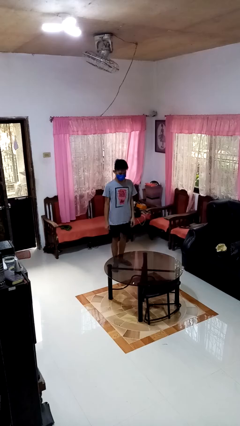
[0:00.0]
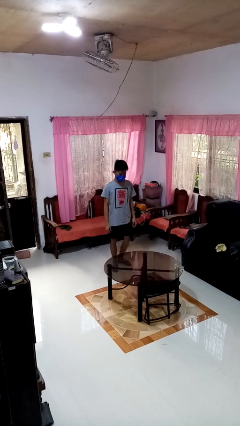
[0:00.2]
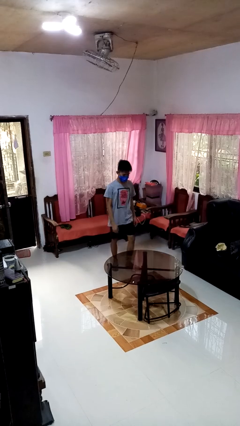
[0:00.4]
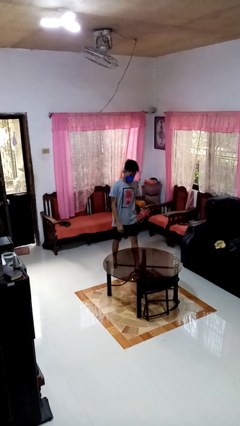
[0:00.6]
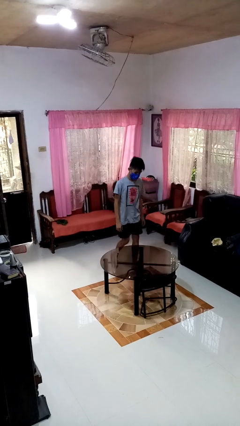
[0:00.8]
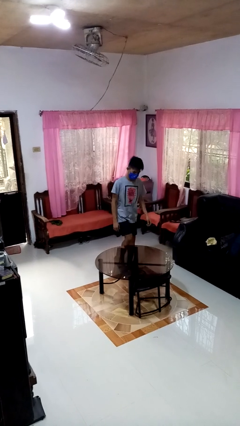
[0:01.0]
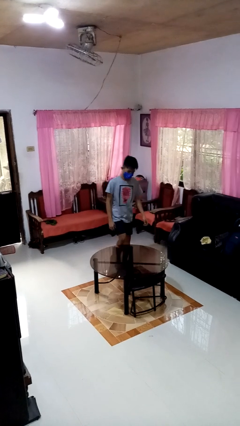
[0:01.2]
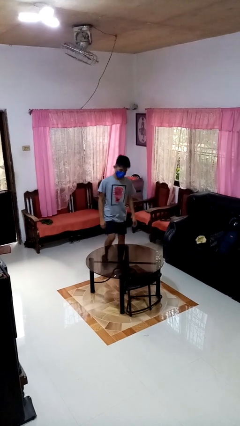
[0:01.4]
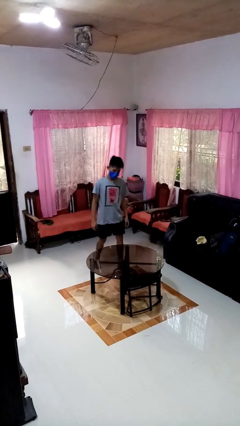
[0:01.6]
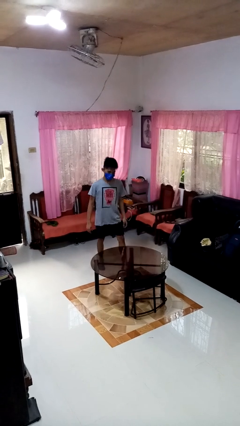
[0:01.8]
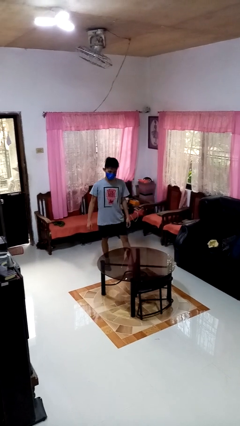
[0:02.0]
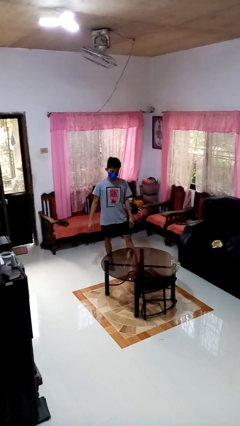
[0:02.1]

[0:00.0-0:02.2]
person bumps into table

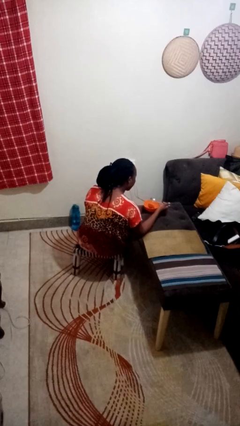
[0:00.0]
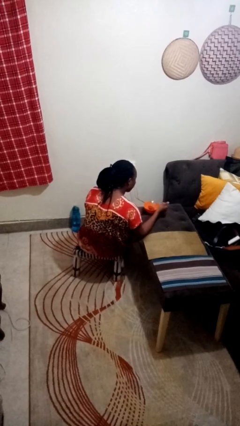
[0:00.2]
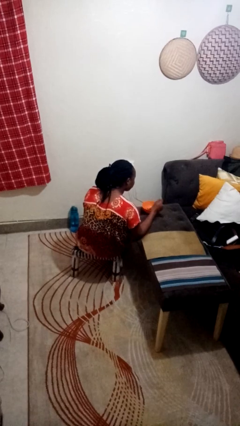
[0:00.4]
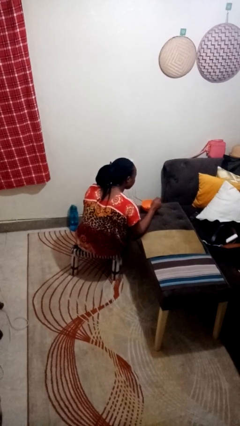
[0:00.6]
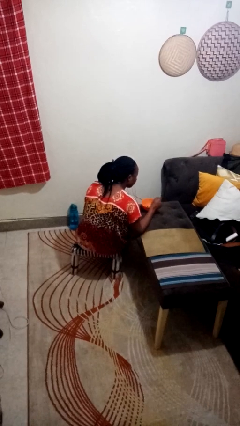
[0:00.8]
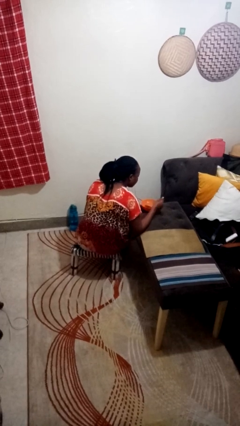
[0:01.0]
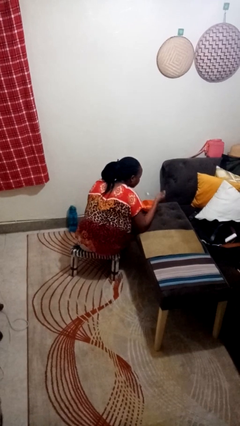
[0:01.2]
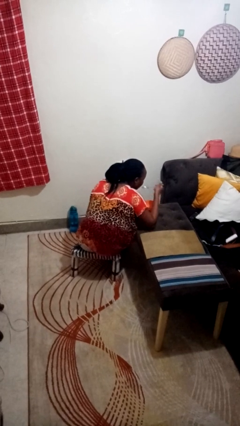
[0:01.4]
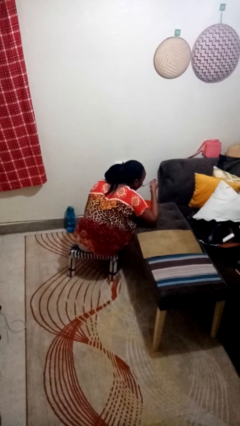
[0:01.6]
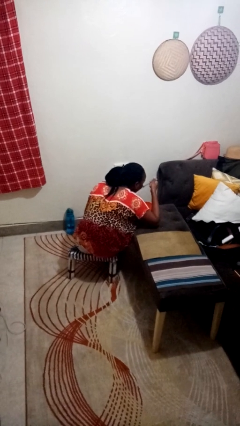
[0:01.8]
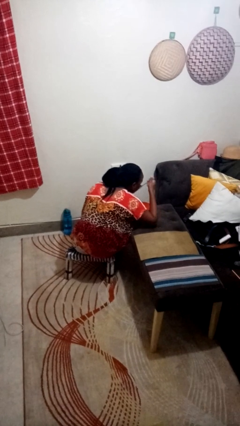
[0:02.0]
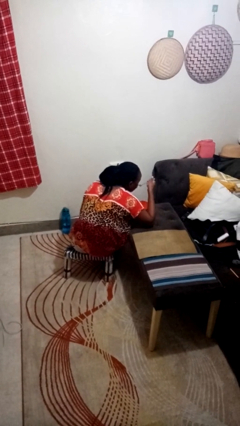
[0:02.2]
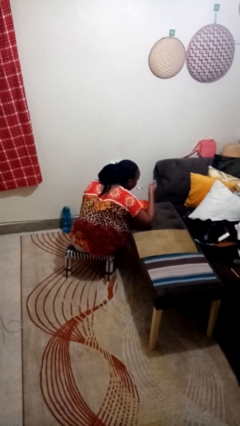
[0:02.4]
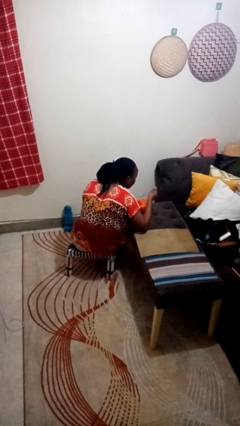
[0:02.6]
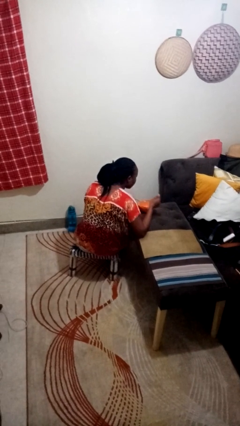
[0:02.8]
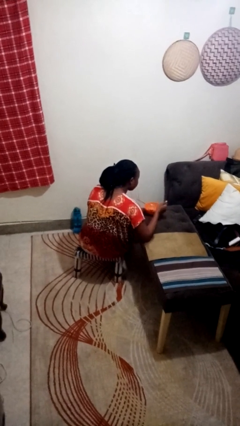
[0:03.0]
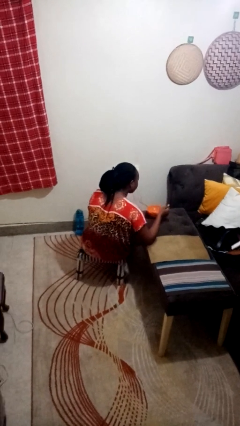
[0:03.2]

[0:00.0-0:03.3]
person eats with utensil

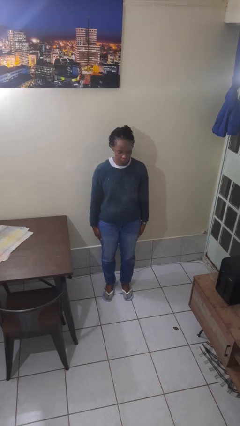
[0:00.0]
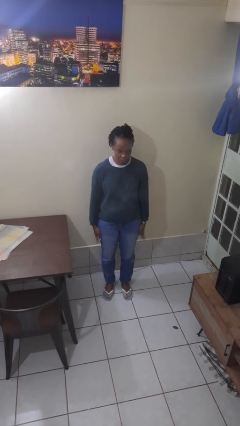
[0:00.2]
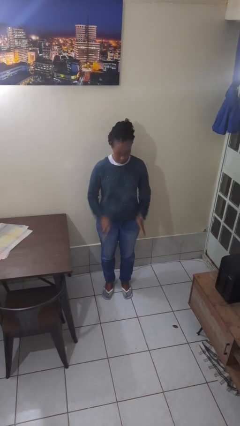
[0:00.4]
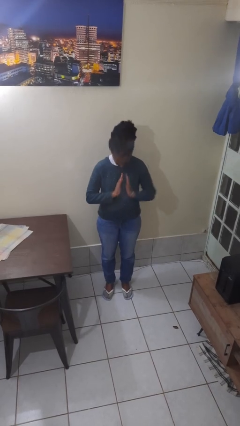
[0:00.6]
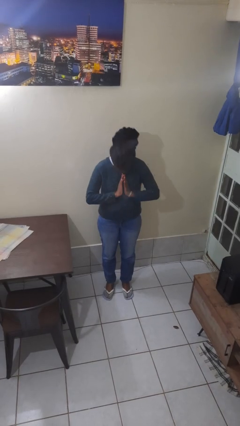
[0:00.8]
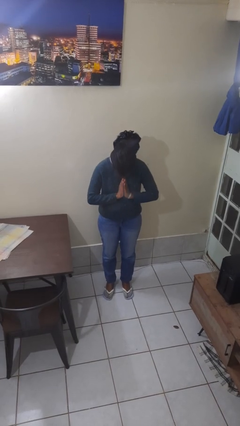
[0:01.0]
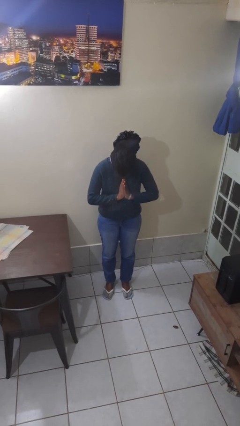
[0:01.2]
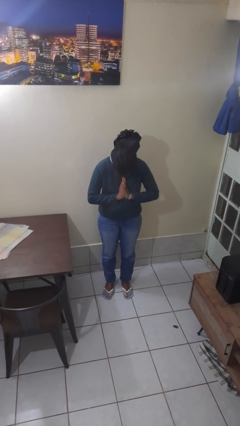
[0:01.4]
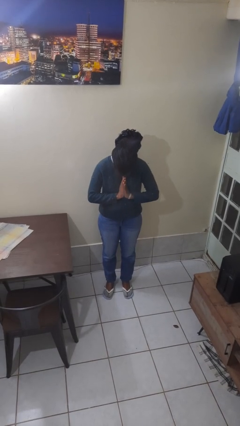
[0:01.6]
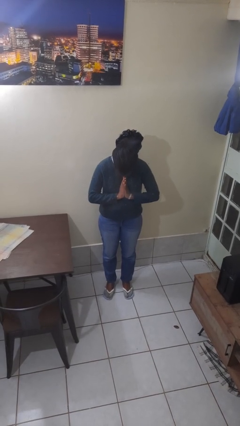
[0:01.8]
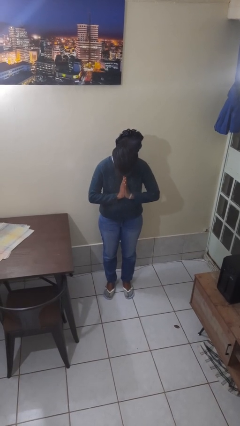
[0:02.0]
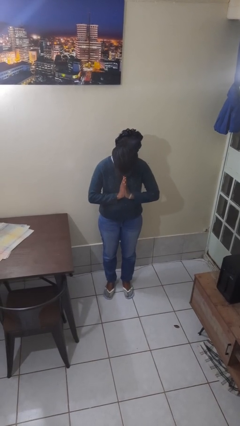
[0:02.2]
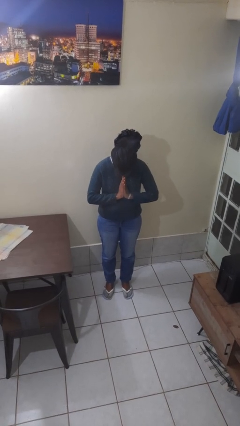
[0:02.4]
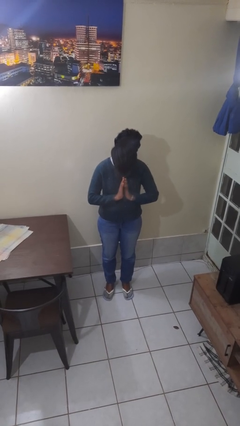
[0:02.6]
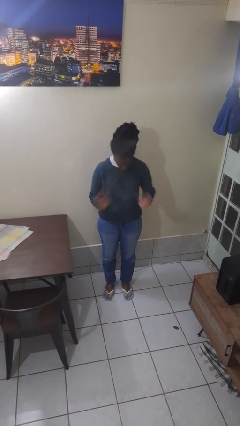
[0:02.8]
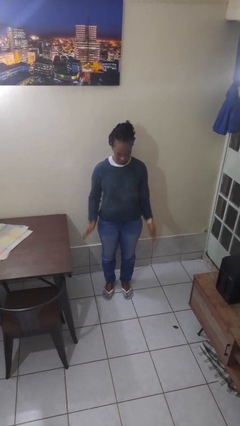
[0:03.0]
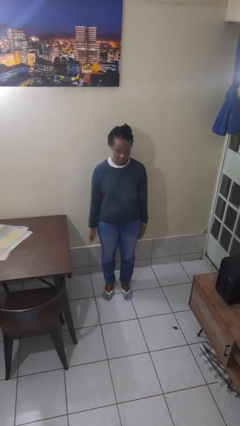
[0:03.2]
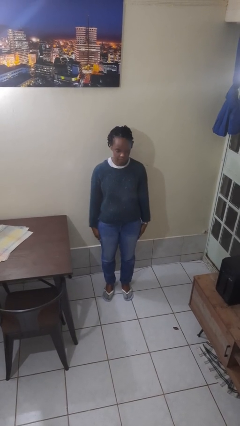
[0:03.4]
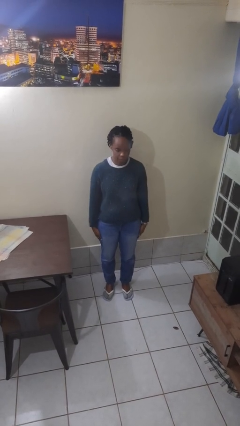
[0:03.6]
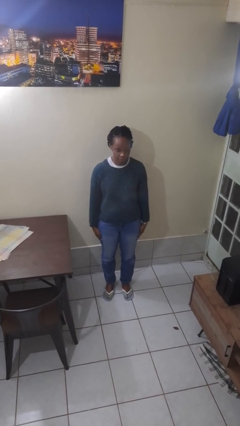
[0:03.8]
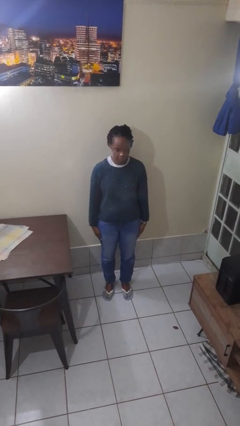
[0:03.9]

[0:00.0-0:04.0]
person prays

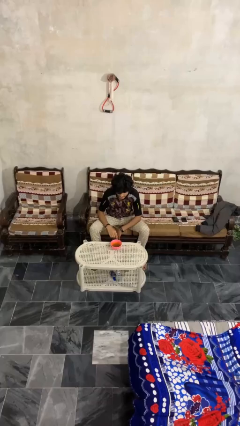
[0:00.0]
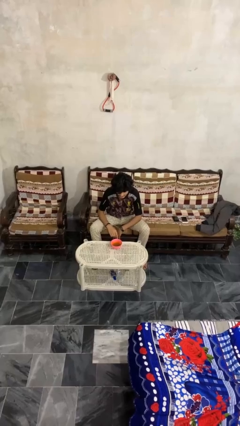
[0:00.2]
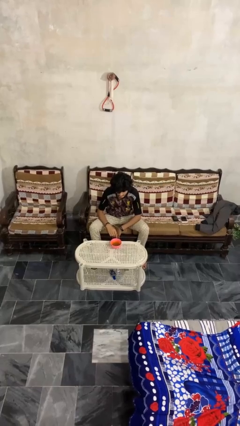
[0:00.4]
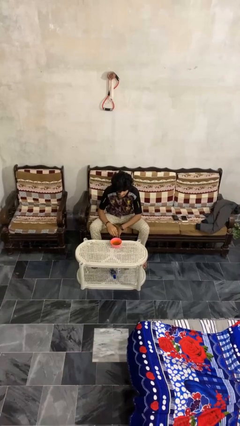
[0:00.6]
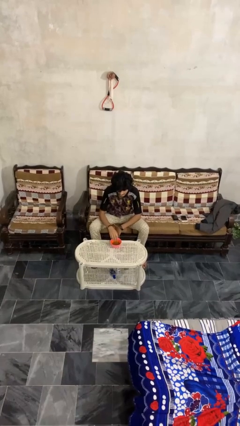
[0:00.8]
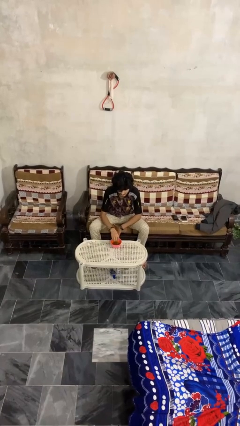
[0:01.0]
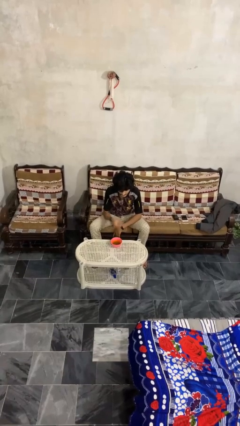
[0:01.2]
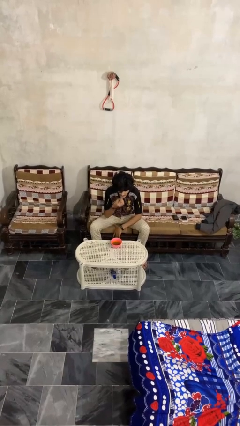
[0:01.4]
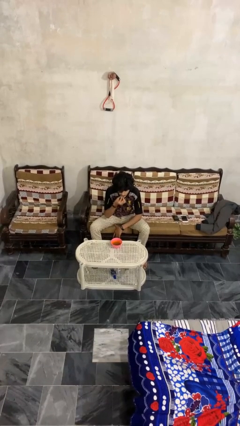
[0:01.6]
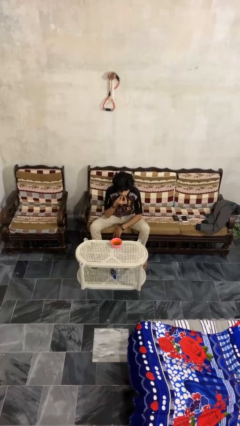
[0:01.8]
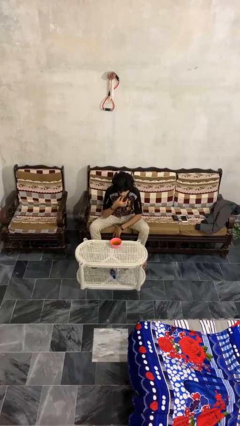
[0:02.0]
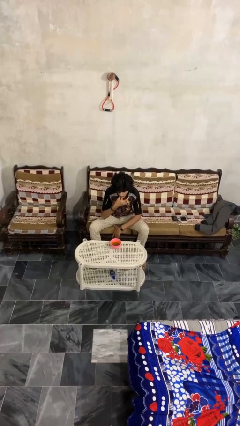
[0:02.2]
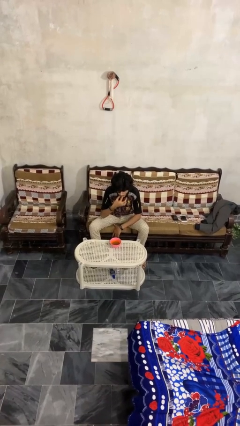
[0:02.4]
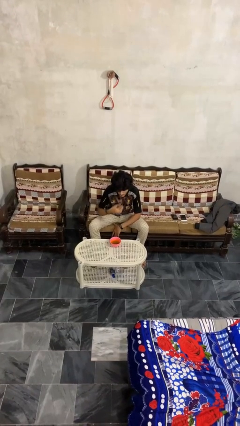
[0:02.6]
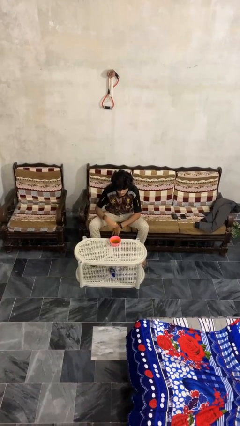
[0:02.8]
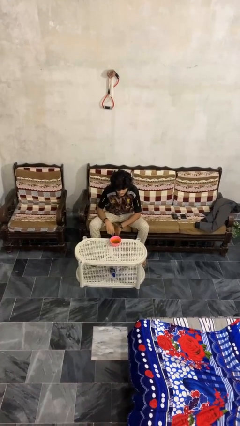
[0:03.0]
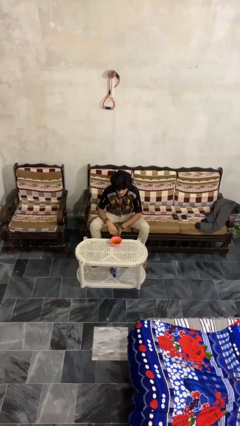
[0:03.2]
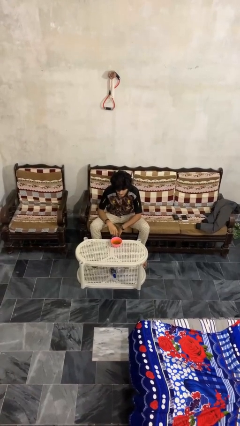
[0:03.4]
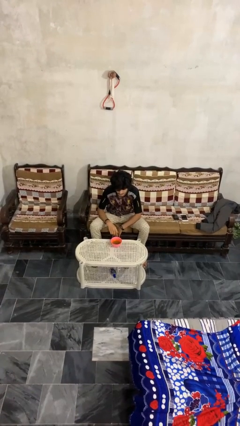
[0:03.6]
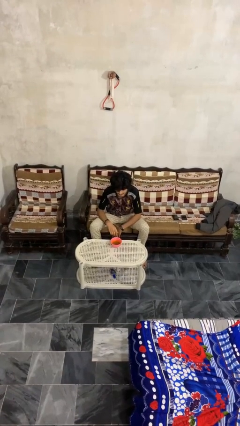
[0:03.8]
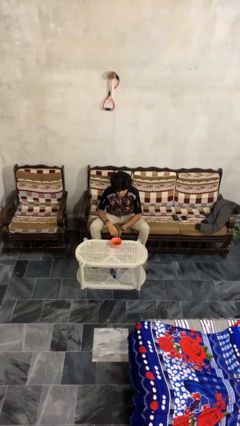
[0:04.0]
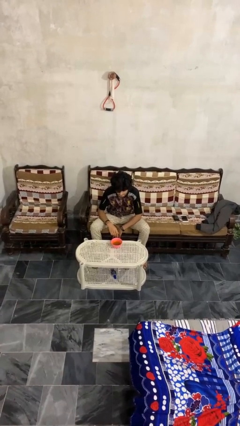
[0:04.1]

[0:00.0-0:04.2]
person eats with hands

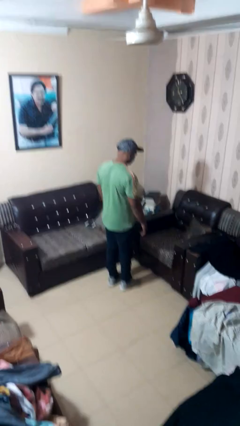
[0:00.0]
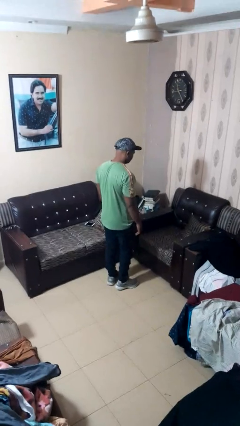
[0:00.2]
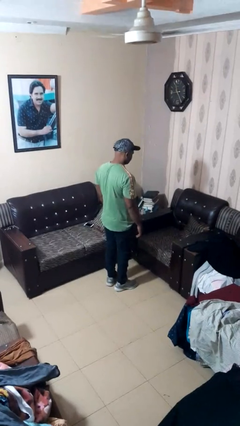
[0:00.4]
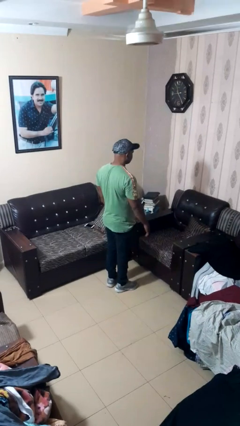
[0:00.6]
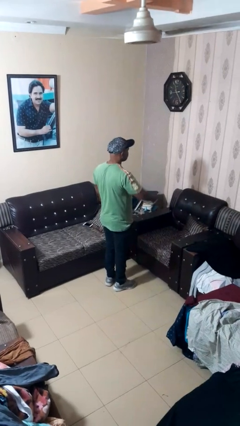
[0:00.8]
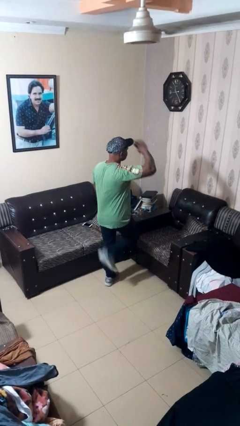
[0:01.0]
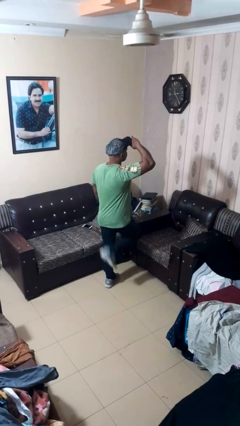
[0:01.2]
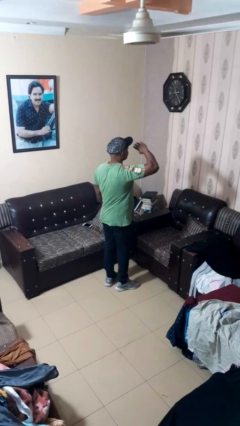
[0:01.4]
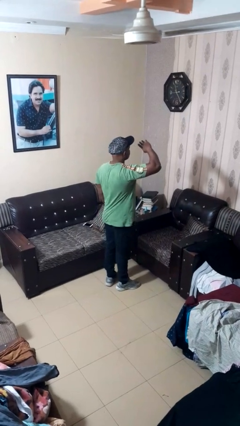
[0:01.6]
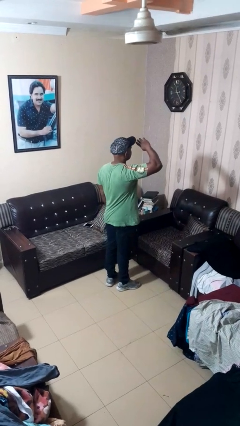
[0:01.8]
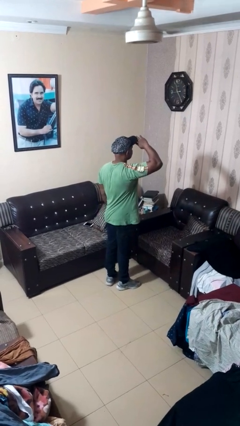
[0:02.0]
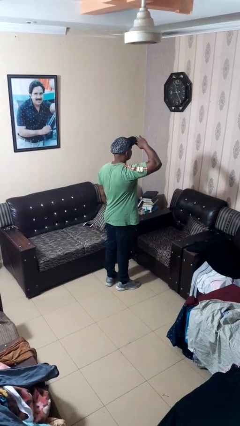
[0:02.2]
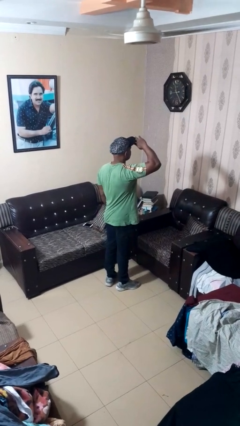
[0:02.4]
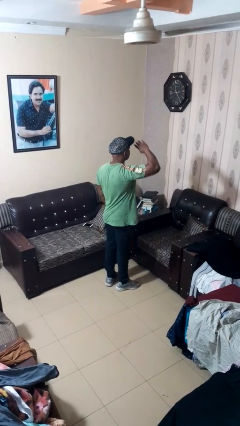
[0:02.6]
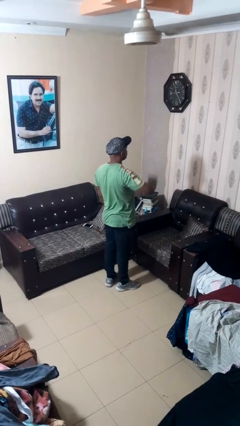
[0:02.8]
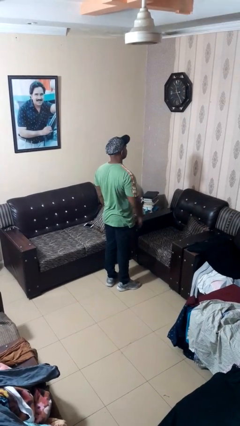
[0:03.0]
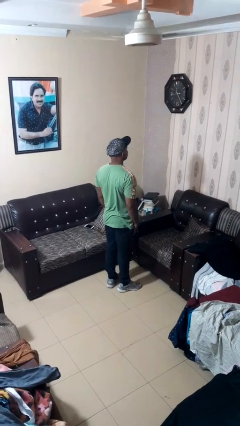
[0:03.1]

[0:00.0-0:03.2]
person salutes

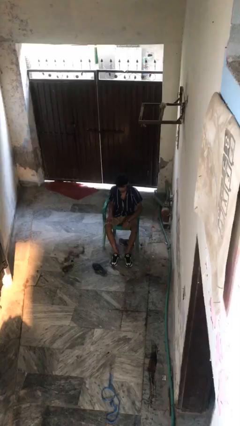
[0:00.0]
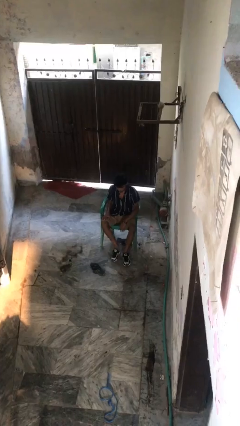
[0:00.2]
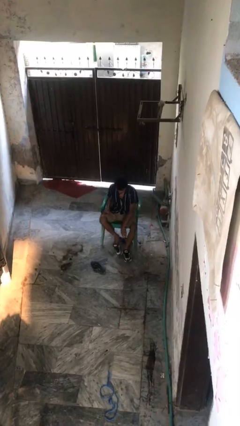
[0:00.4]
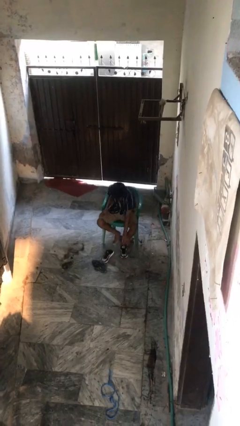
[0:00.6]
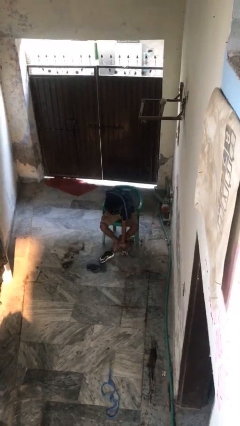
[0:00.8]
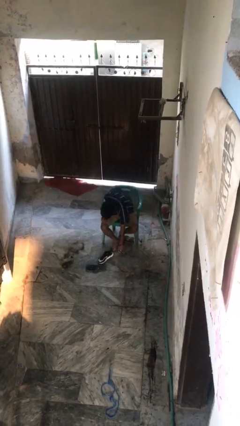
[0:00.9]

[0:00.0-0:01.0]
person takes off shoes
